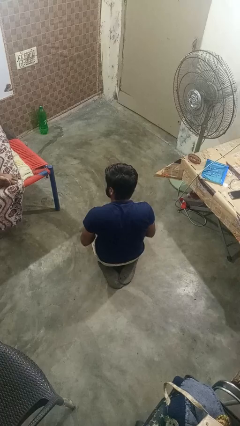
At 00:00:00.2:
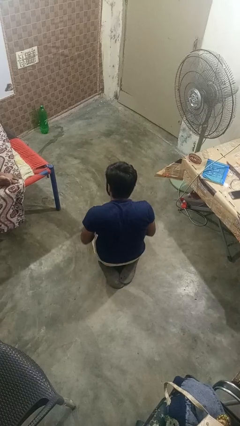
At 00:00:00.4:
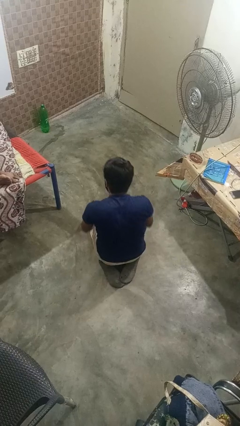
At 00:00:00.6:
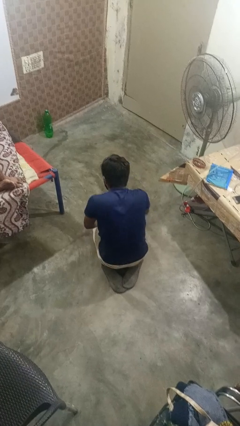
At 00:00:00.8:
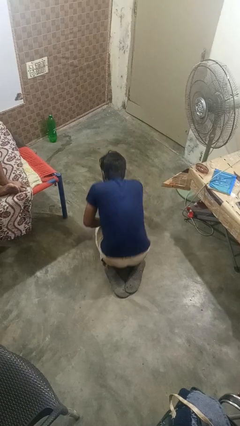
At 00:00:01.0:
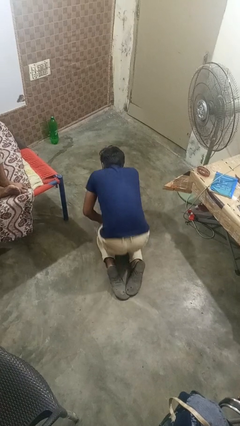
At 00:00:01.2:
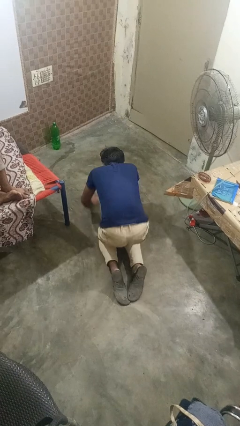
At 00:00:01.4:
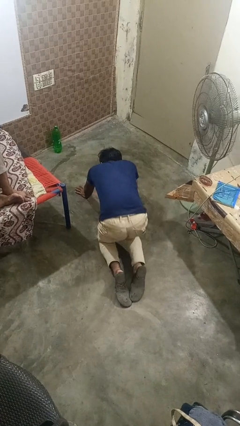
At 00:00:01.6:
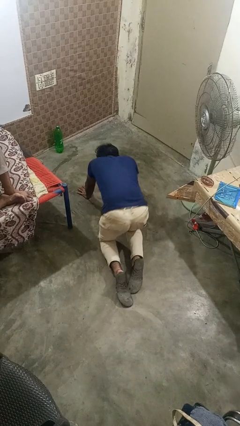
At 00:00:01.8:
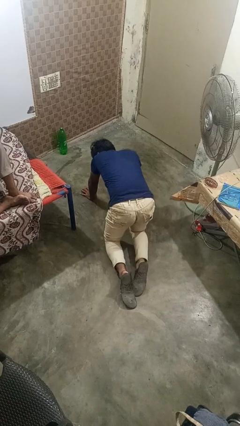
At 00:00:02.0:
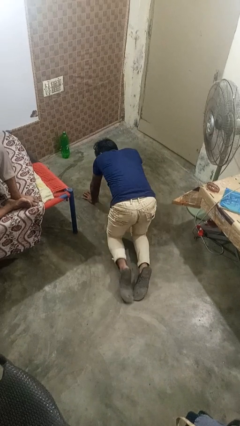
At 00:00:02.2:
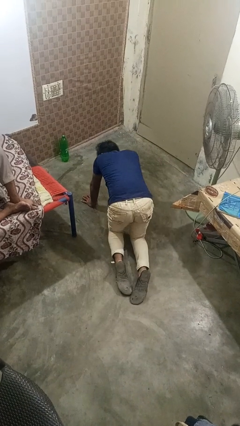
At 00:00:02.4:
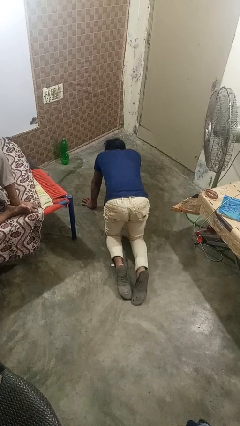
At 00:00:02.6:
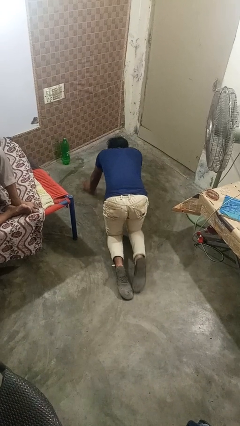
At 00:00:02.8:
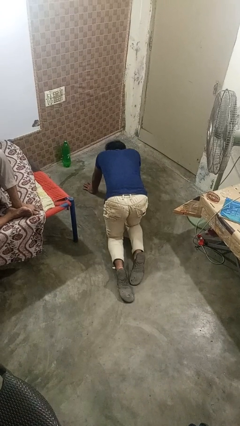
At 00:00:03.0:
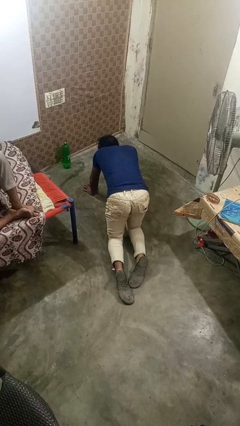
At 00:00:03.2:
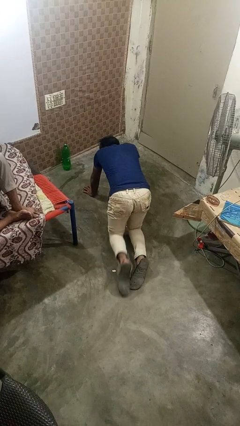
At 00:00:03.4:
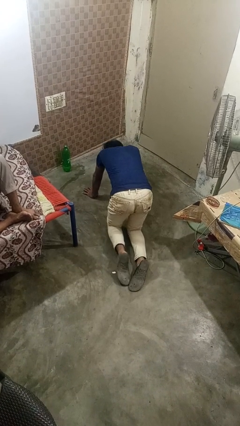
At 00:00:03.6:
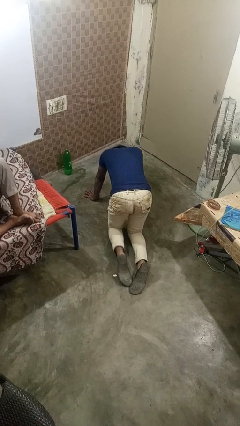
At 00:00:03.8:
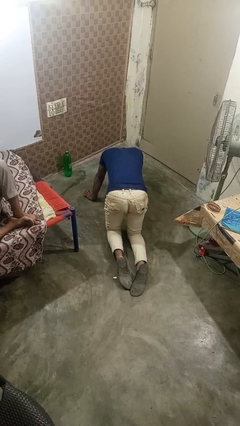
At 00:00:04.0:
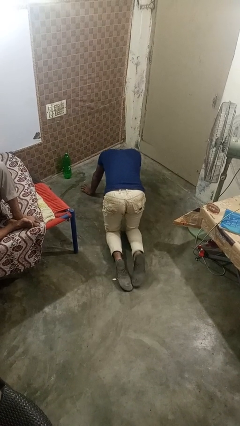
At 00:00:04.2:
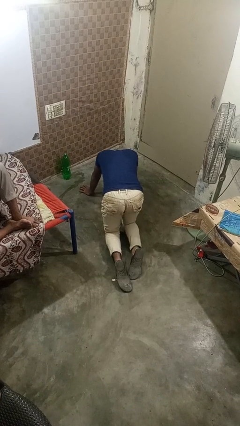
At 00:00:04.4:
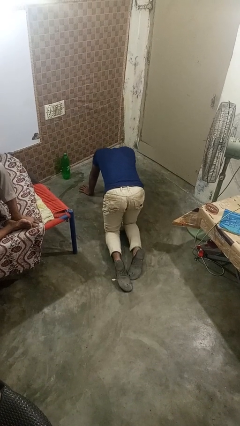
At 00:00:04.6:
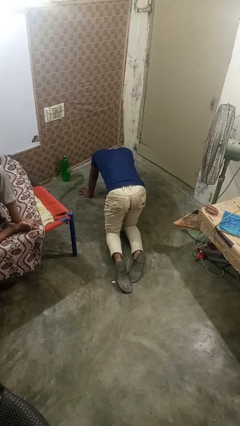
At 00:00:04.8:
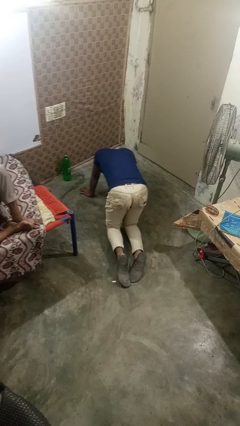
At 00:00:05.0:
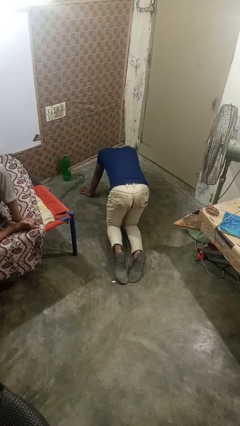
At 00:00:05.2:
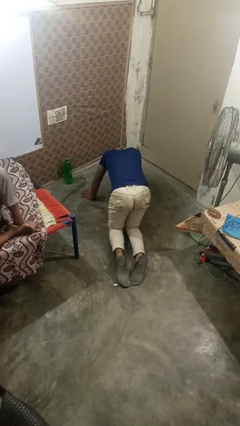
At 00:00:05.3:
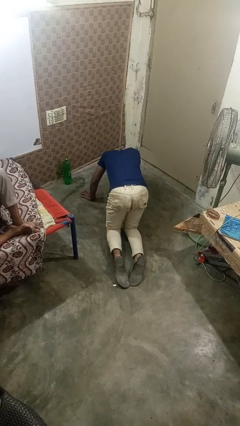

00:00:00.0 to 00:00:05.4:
person crawls

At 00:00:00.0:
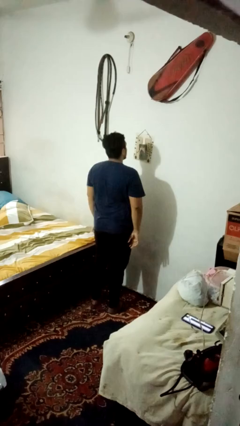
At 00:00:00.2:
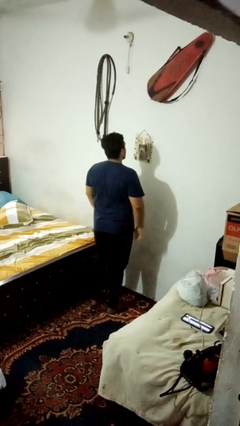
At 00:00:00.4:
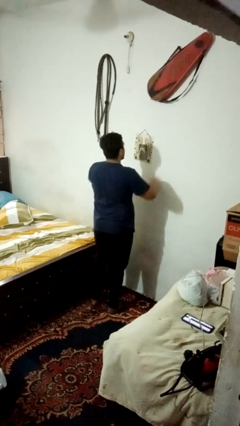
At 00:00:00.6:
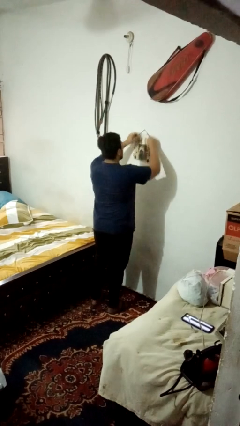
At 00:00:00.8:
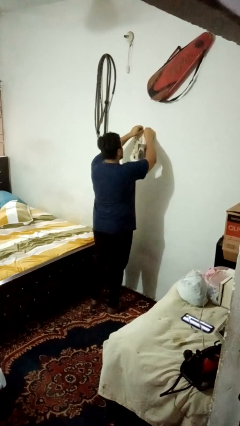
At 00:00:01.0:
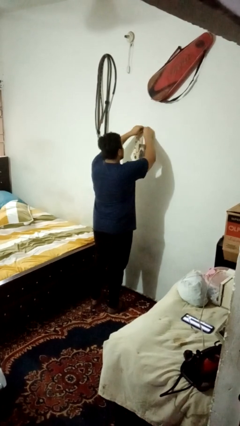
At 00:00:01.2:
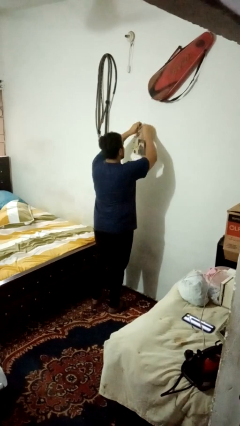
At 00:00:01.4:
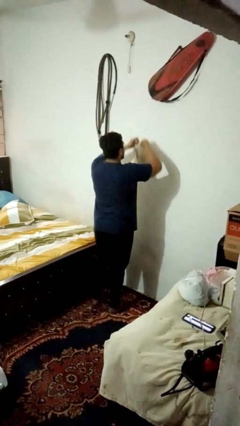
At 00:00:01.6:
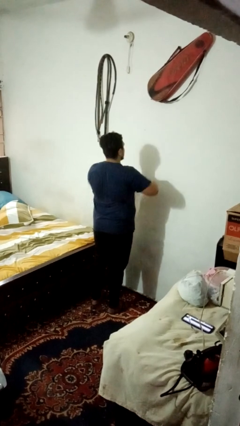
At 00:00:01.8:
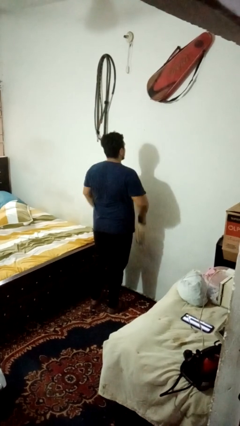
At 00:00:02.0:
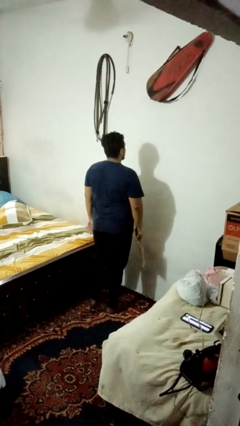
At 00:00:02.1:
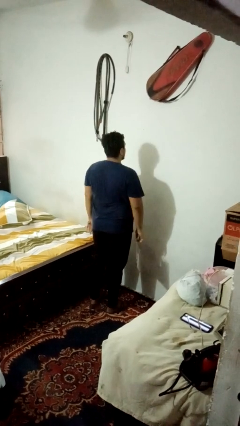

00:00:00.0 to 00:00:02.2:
person takes down picture frame

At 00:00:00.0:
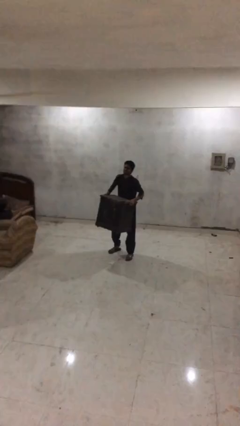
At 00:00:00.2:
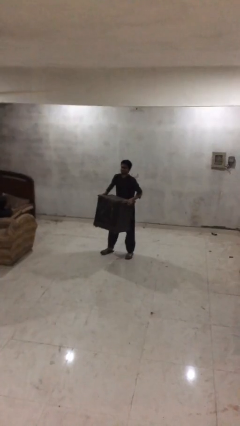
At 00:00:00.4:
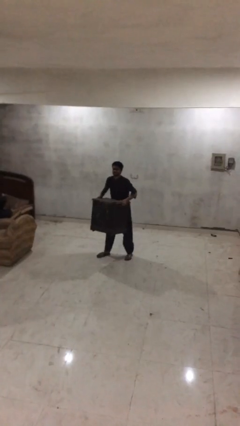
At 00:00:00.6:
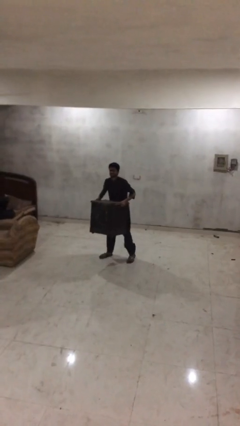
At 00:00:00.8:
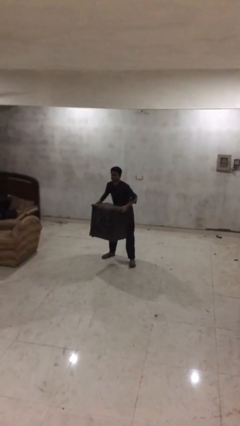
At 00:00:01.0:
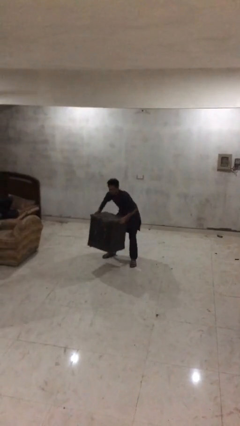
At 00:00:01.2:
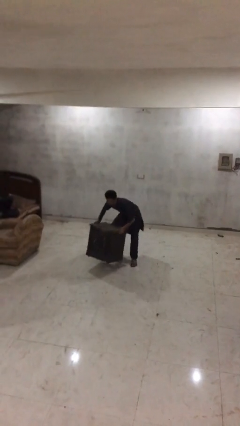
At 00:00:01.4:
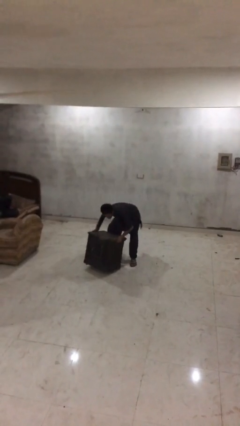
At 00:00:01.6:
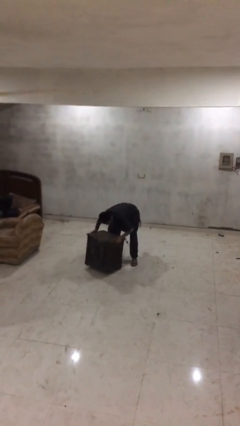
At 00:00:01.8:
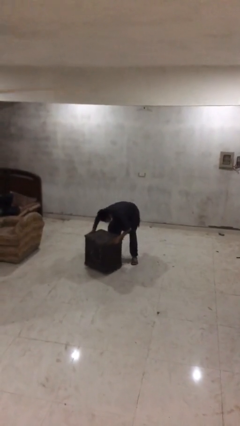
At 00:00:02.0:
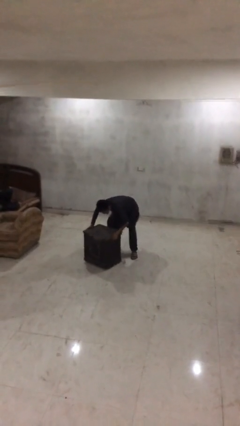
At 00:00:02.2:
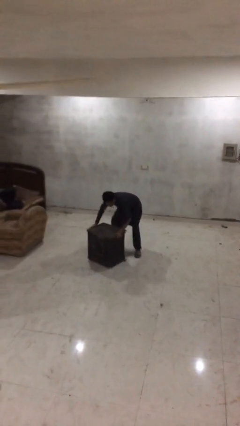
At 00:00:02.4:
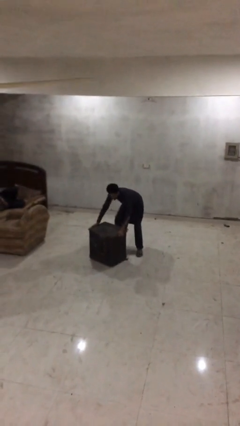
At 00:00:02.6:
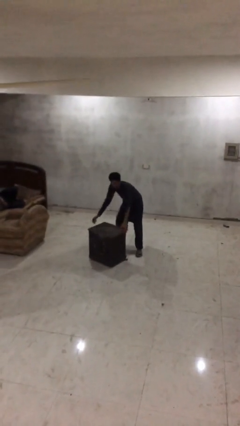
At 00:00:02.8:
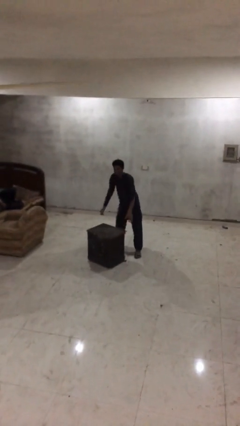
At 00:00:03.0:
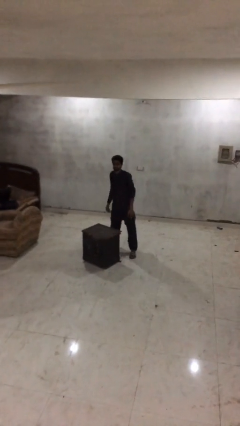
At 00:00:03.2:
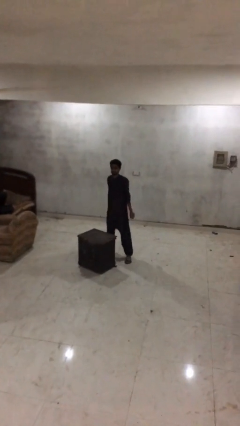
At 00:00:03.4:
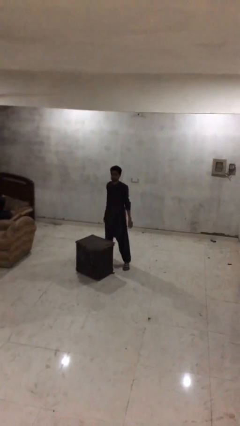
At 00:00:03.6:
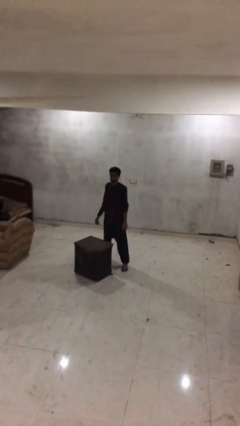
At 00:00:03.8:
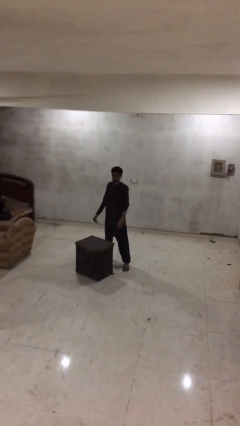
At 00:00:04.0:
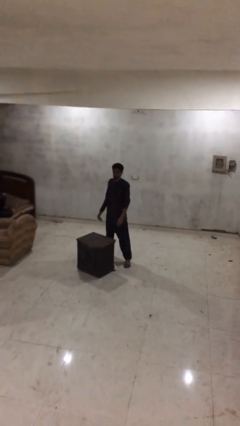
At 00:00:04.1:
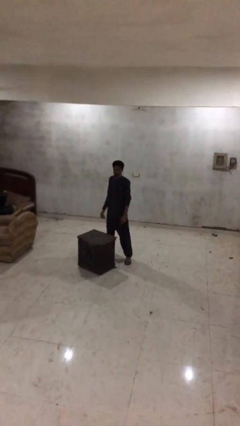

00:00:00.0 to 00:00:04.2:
person puts down object on floor

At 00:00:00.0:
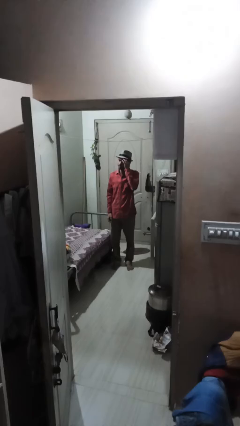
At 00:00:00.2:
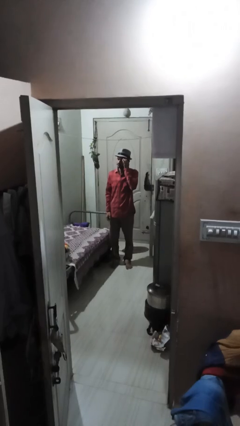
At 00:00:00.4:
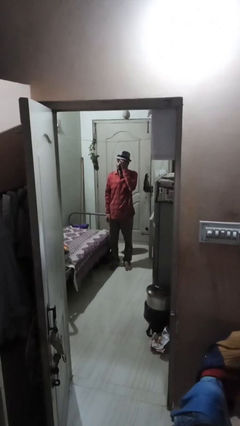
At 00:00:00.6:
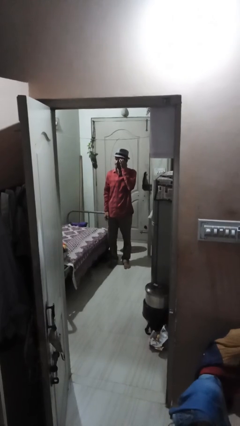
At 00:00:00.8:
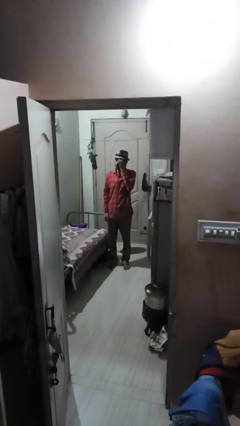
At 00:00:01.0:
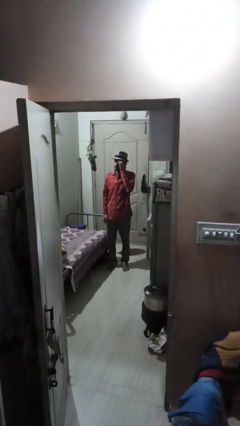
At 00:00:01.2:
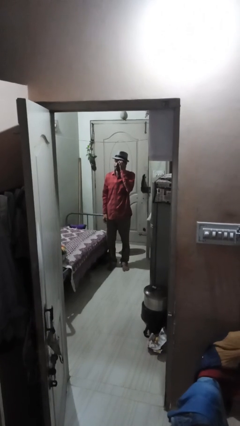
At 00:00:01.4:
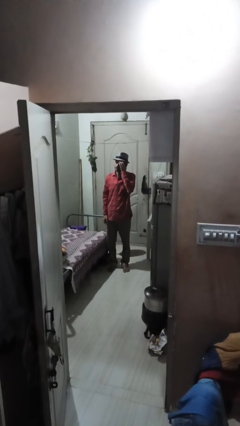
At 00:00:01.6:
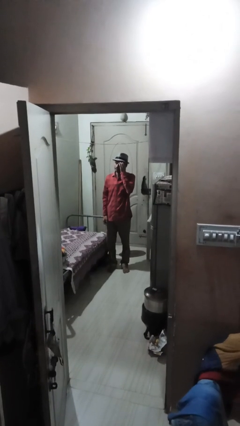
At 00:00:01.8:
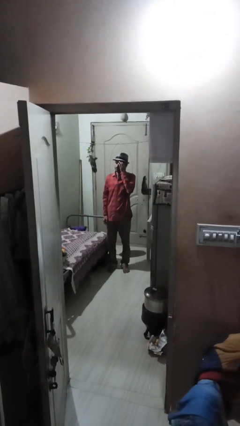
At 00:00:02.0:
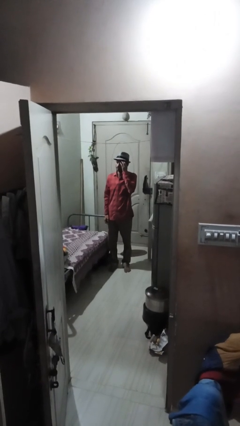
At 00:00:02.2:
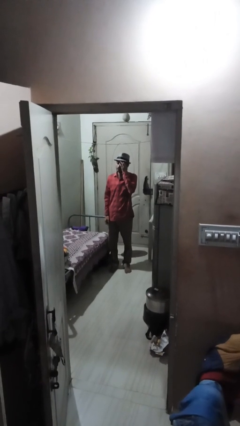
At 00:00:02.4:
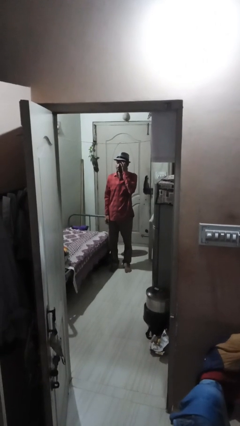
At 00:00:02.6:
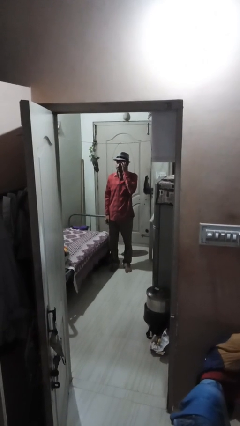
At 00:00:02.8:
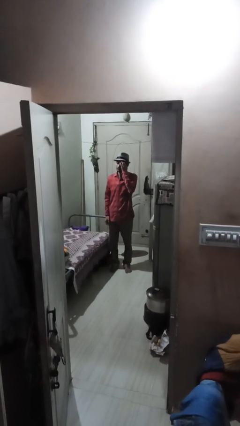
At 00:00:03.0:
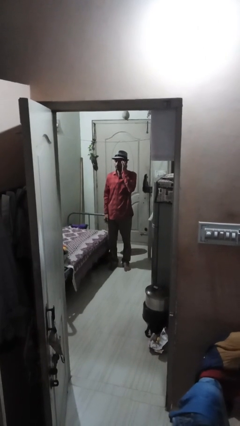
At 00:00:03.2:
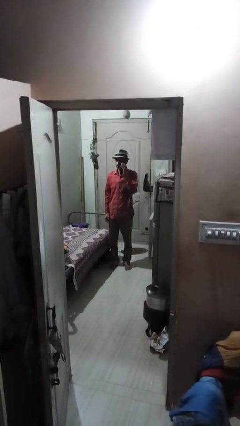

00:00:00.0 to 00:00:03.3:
person scratches face

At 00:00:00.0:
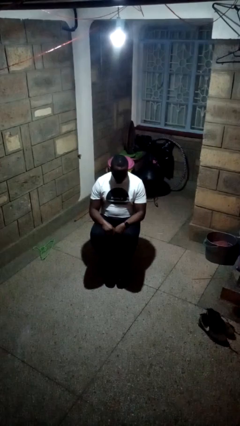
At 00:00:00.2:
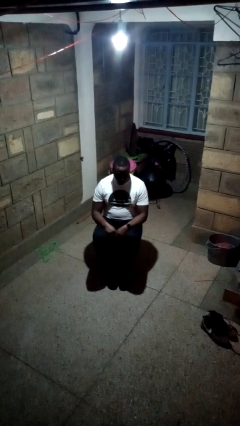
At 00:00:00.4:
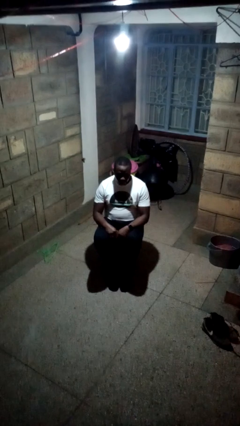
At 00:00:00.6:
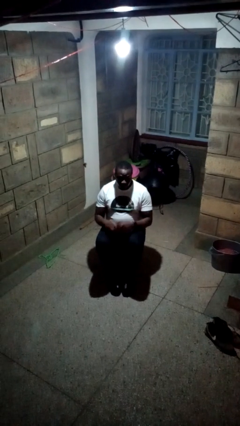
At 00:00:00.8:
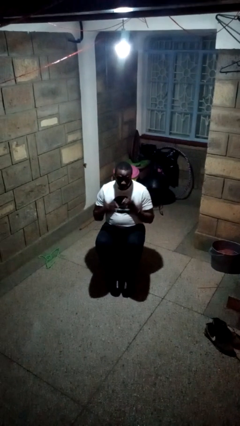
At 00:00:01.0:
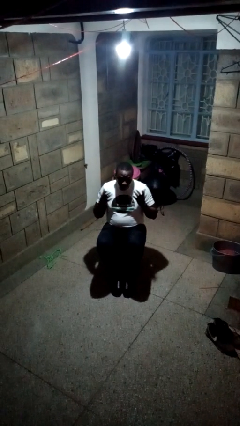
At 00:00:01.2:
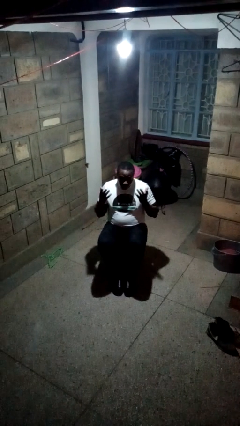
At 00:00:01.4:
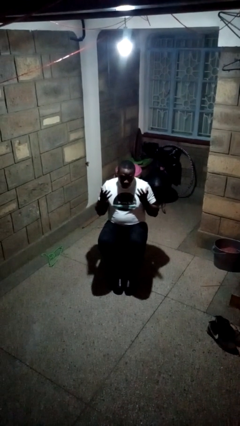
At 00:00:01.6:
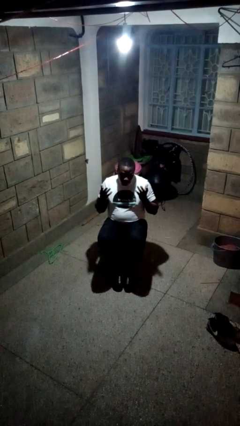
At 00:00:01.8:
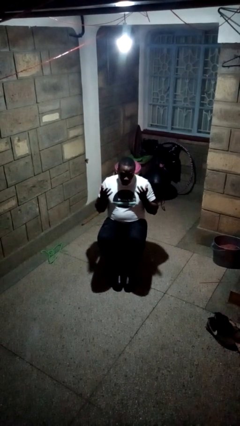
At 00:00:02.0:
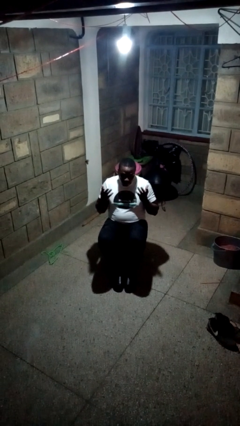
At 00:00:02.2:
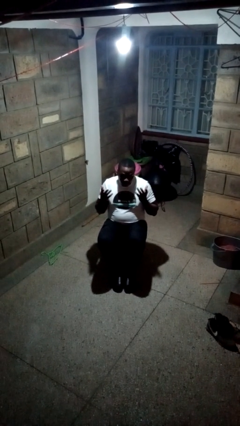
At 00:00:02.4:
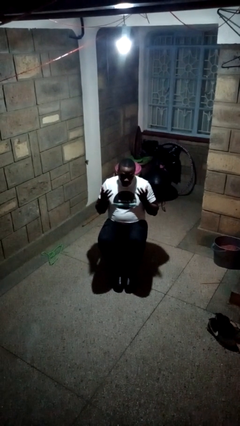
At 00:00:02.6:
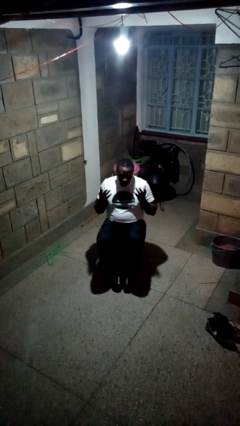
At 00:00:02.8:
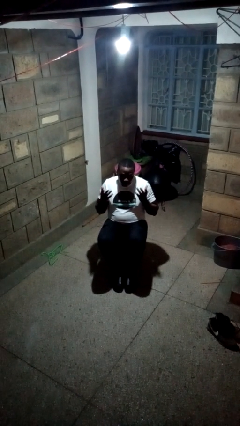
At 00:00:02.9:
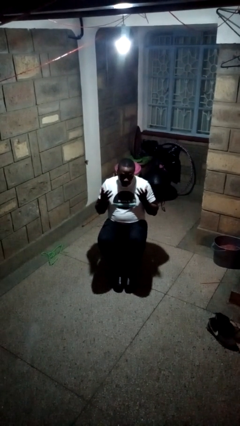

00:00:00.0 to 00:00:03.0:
person shrugs
